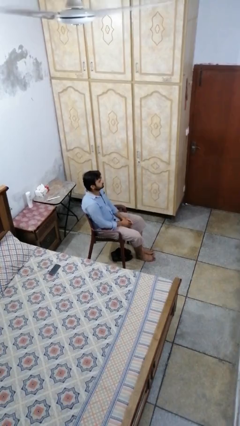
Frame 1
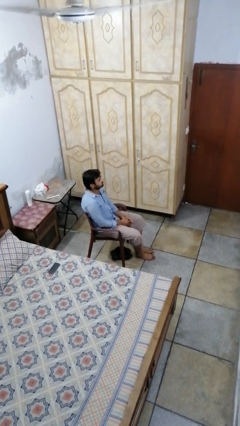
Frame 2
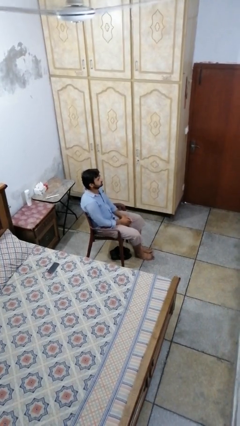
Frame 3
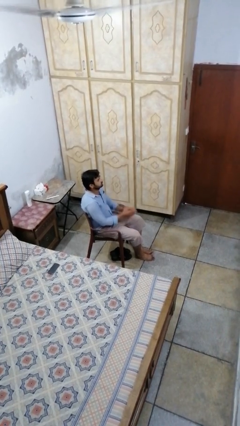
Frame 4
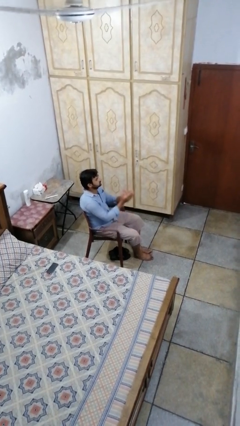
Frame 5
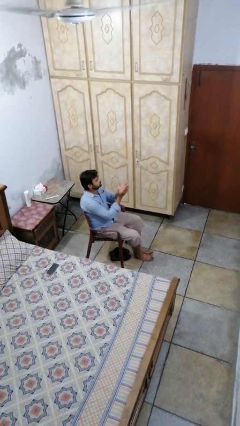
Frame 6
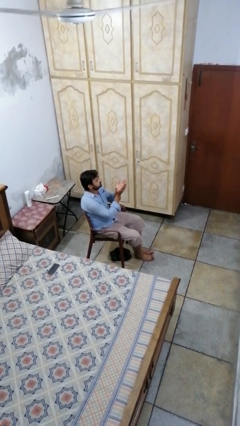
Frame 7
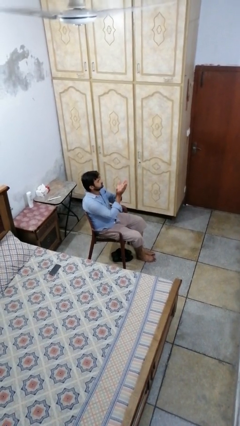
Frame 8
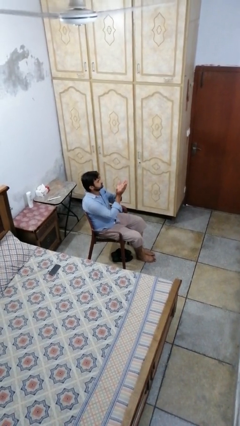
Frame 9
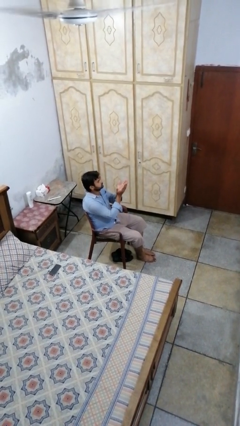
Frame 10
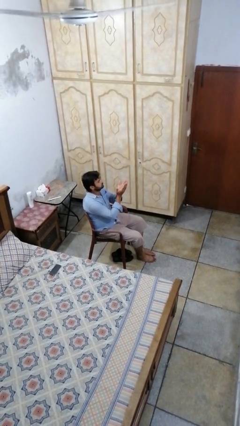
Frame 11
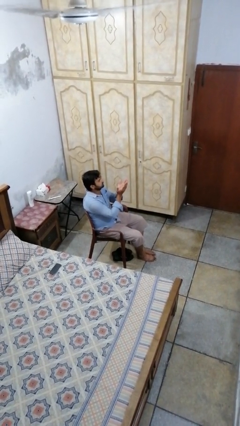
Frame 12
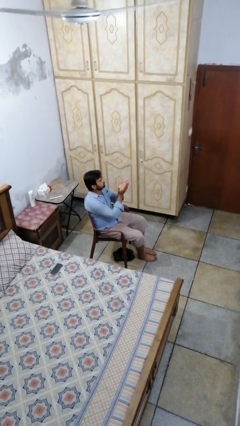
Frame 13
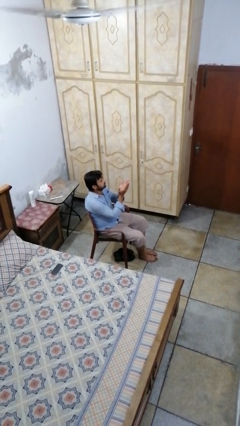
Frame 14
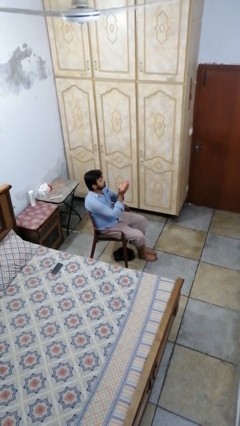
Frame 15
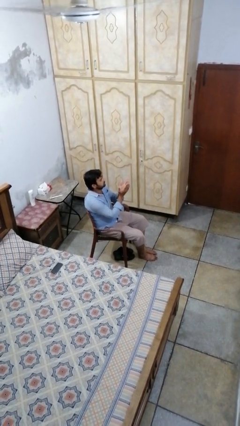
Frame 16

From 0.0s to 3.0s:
person prays

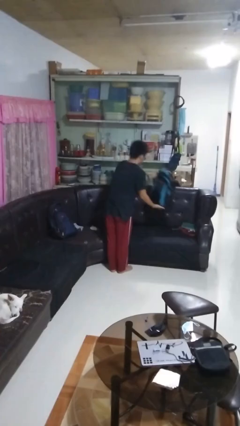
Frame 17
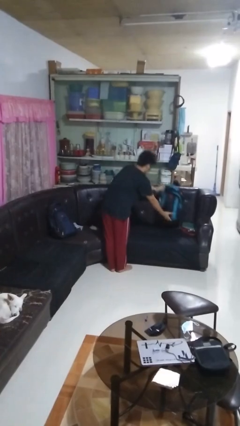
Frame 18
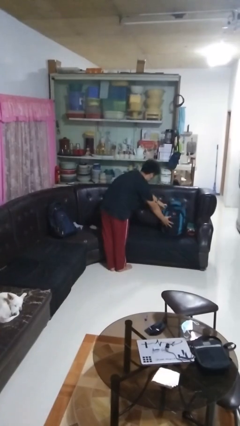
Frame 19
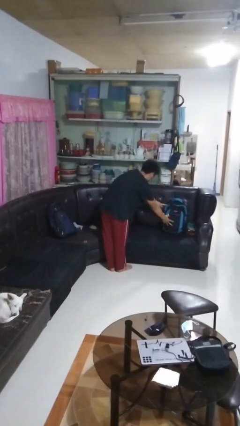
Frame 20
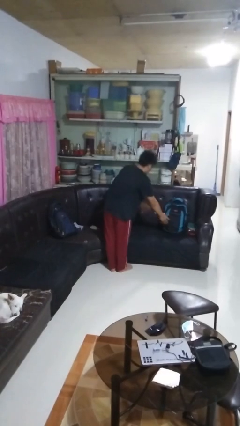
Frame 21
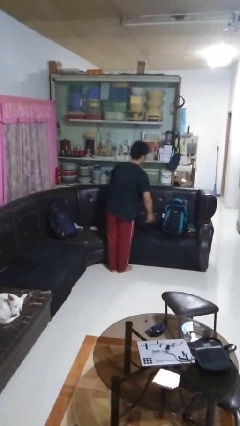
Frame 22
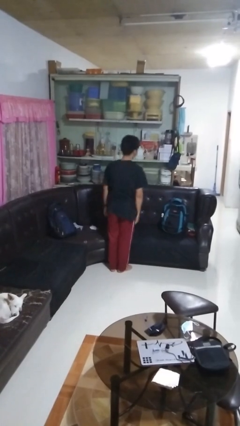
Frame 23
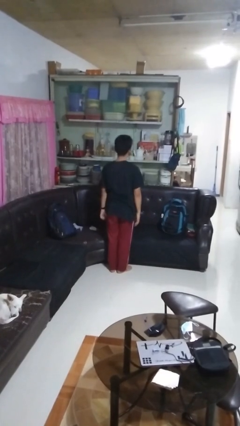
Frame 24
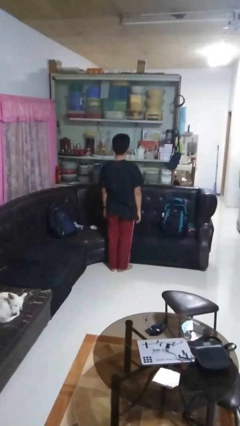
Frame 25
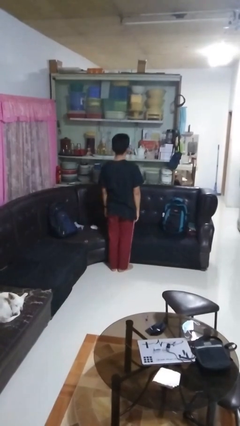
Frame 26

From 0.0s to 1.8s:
person puts down object on couch

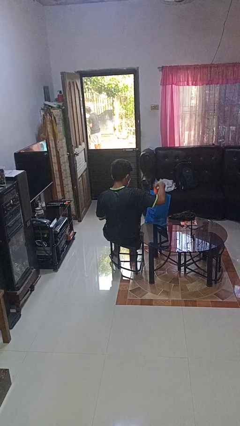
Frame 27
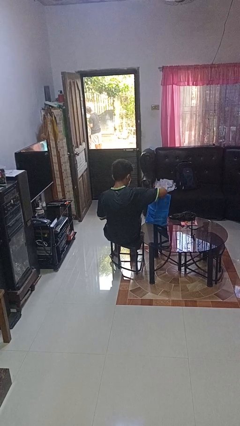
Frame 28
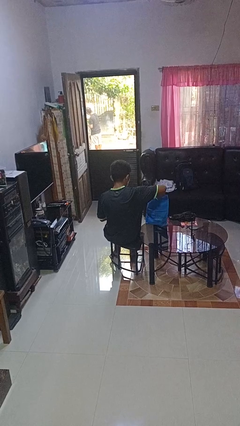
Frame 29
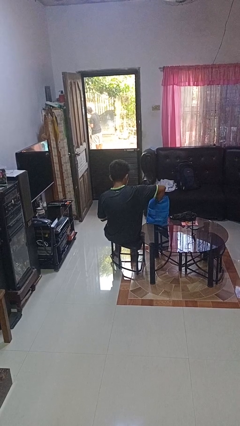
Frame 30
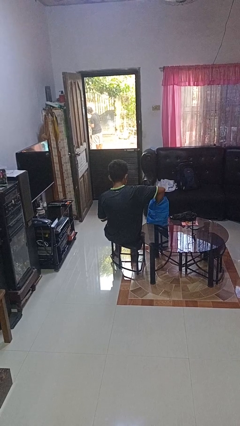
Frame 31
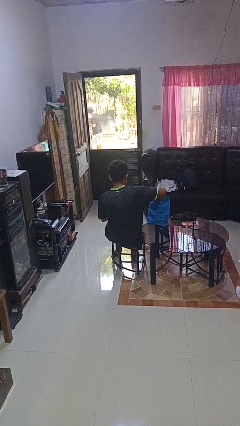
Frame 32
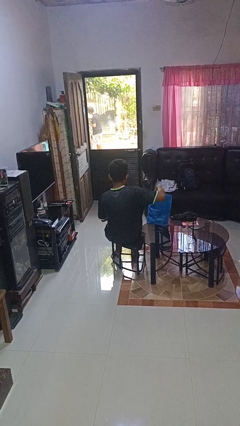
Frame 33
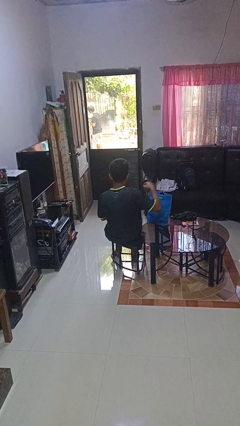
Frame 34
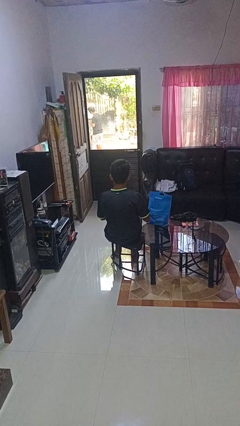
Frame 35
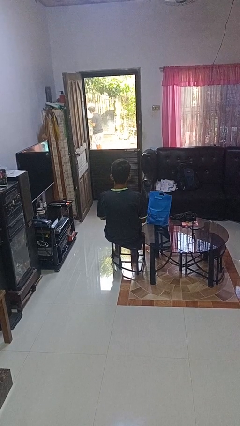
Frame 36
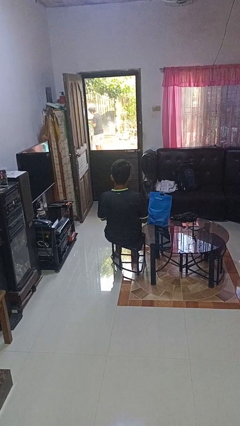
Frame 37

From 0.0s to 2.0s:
person puts object into bag

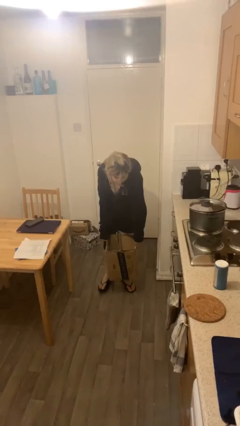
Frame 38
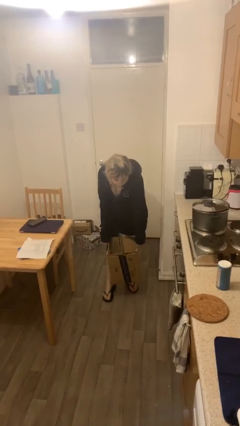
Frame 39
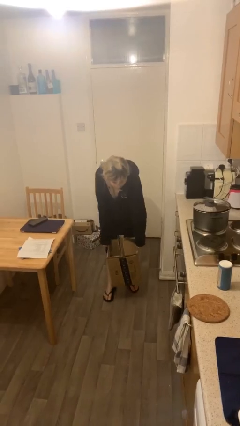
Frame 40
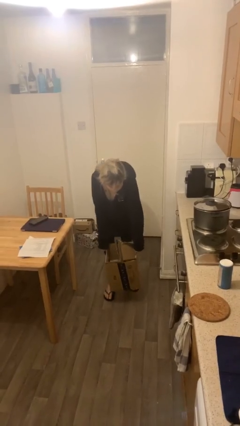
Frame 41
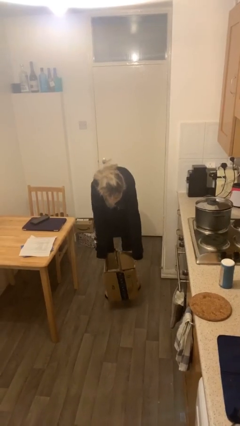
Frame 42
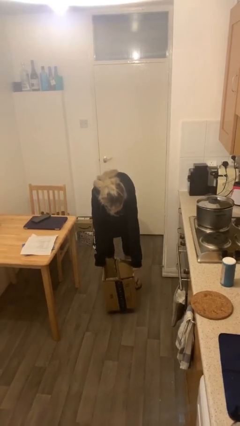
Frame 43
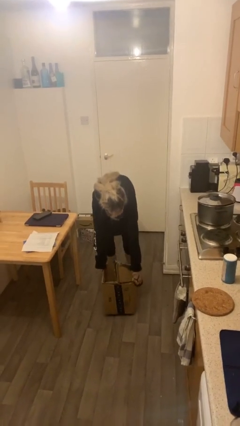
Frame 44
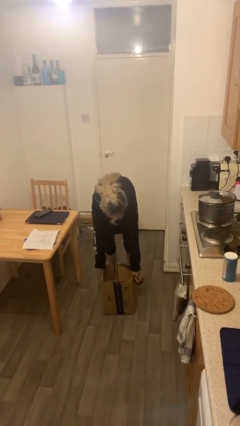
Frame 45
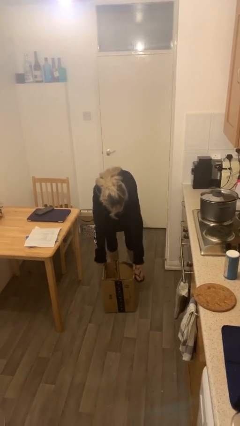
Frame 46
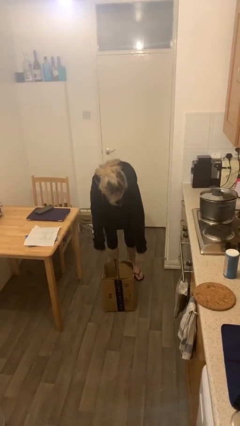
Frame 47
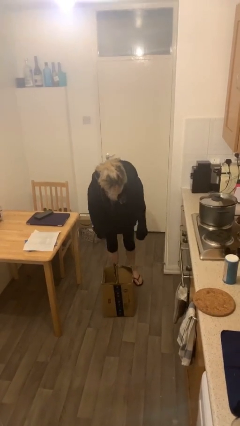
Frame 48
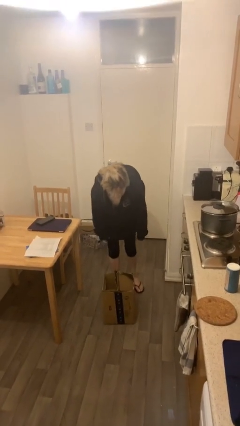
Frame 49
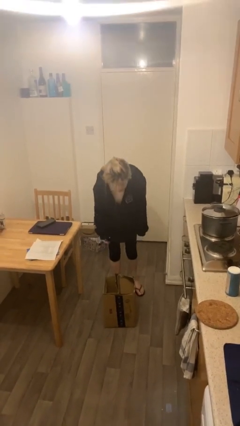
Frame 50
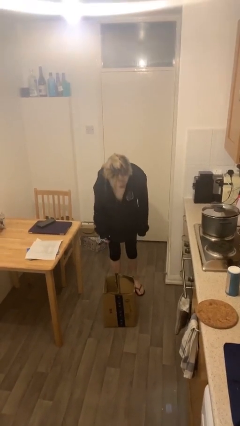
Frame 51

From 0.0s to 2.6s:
person puts down object on floor

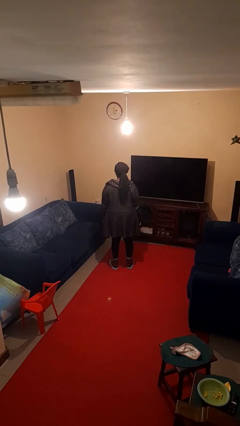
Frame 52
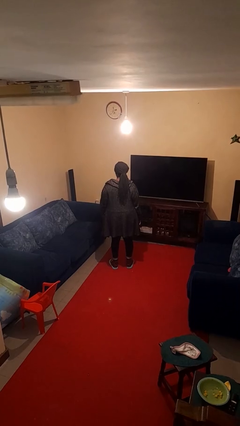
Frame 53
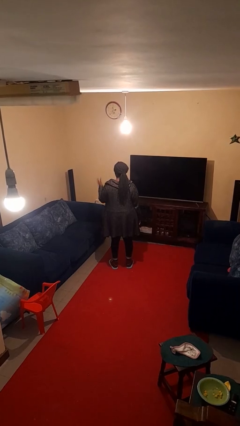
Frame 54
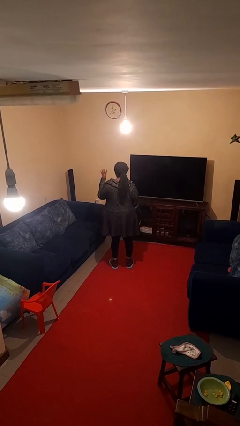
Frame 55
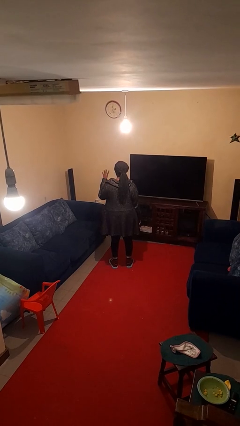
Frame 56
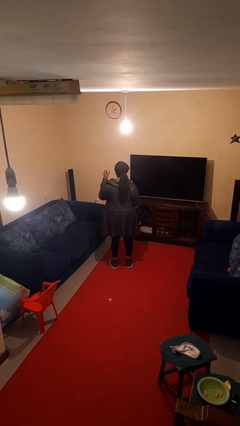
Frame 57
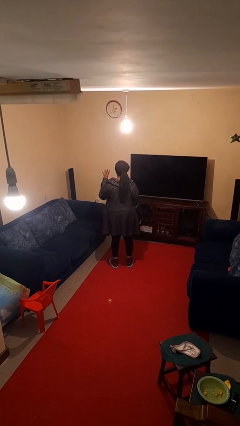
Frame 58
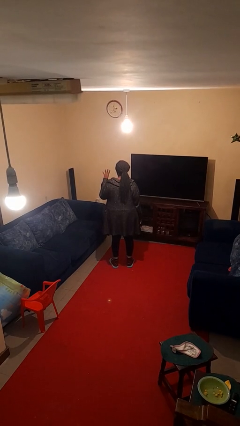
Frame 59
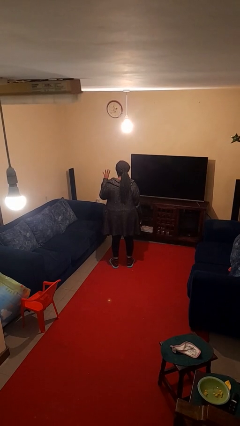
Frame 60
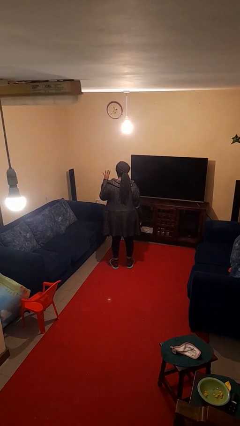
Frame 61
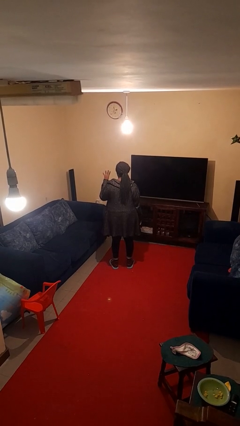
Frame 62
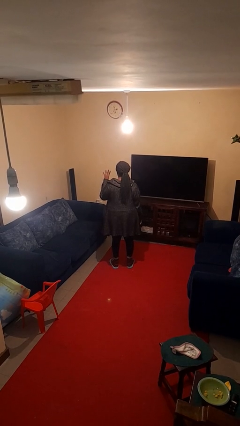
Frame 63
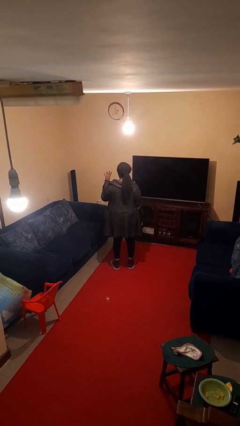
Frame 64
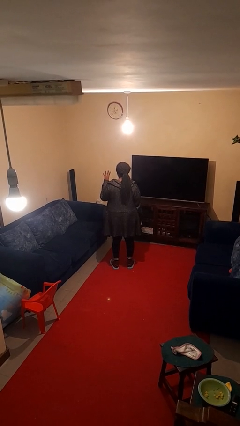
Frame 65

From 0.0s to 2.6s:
person gestures number four

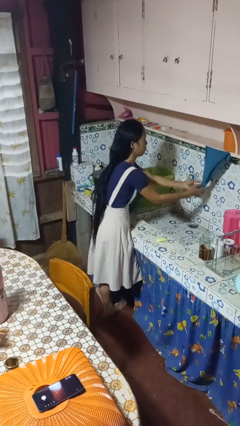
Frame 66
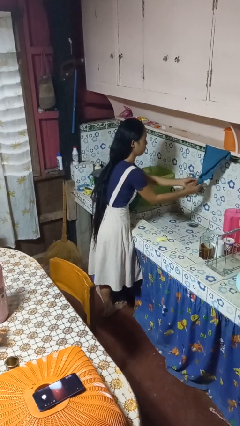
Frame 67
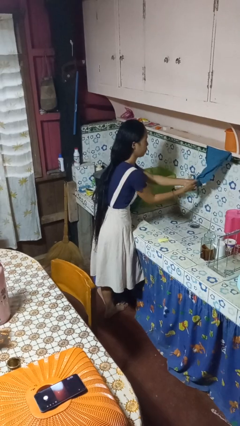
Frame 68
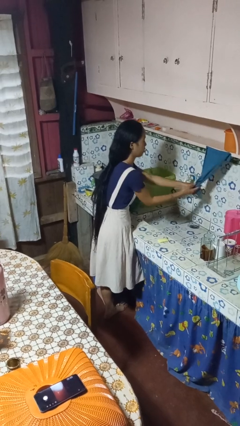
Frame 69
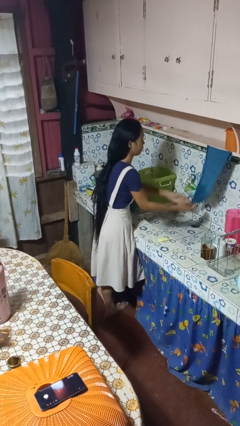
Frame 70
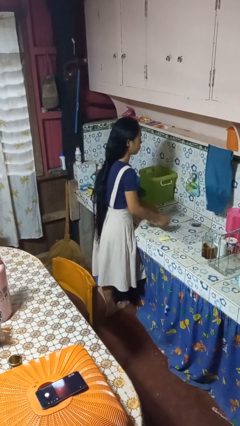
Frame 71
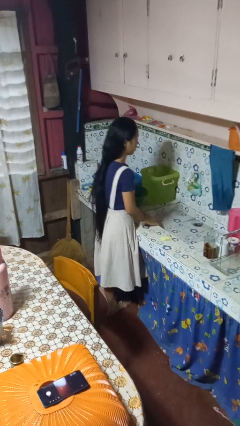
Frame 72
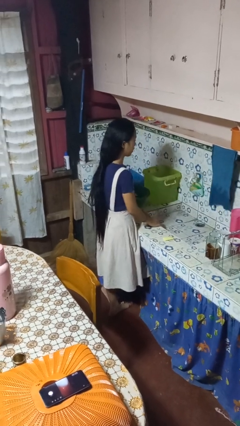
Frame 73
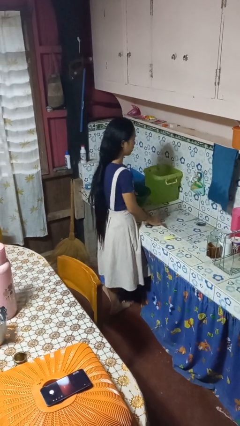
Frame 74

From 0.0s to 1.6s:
person dries hands with towel

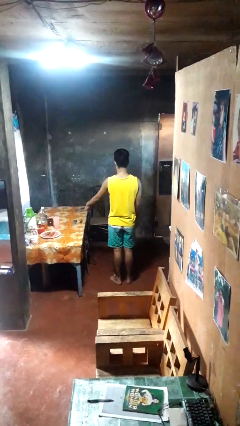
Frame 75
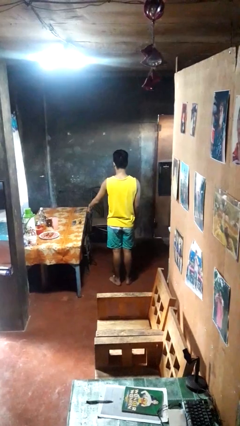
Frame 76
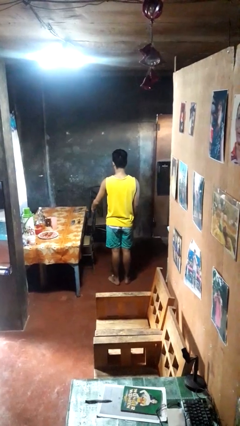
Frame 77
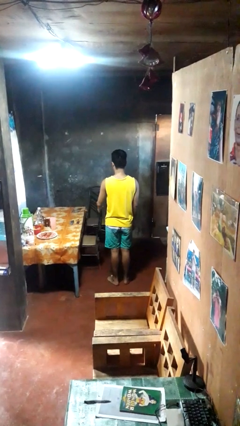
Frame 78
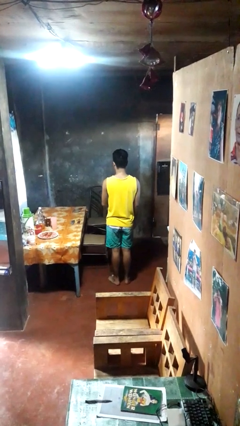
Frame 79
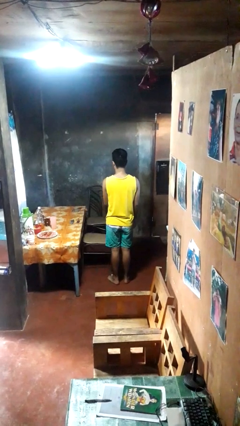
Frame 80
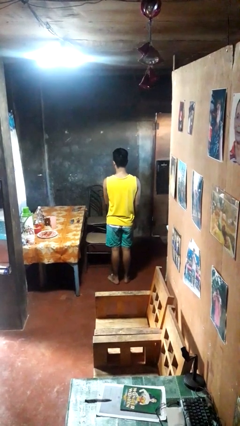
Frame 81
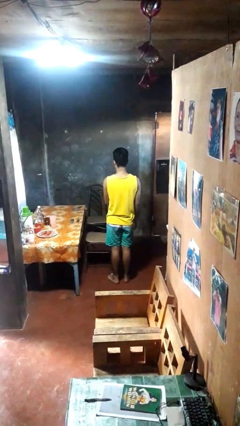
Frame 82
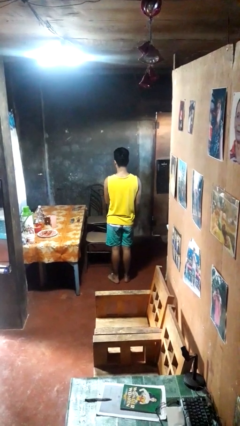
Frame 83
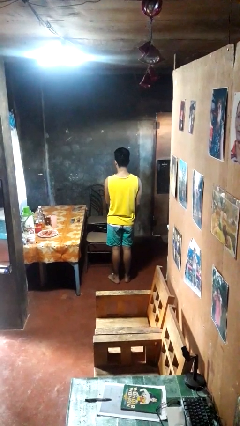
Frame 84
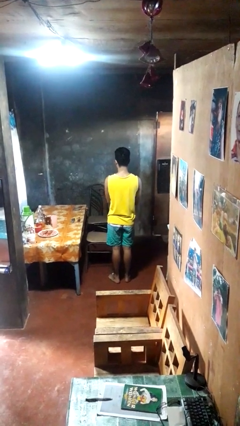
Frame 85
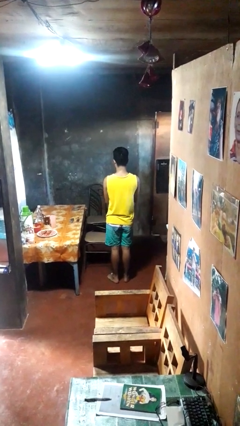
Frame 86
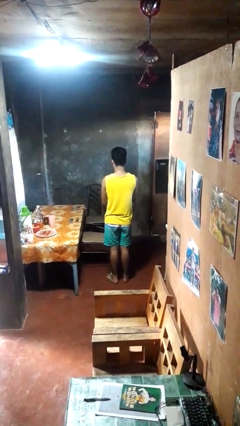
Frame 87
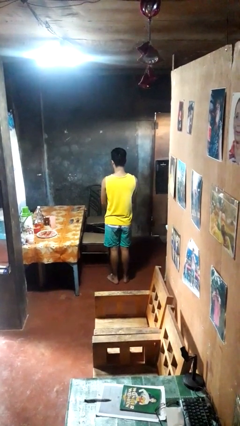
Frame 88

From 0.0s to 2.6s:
person pulls out chair

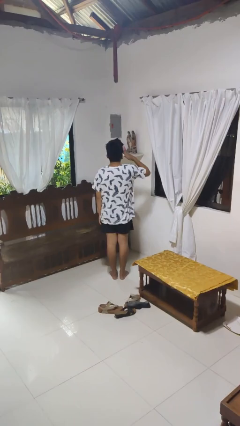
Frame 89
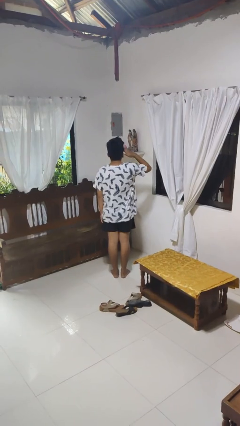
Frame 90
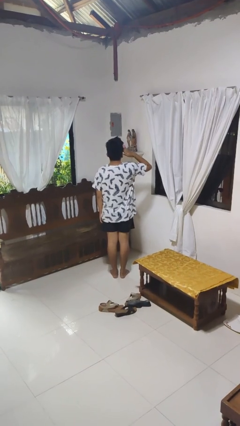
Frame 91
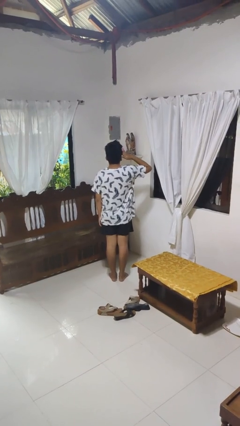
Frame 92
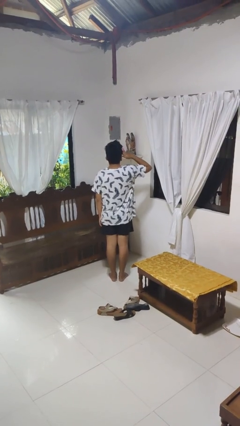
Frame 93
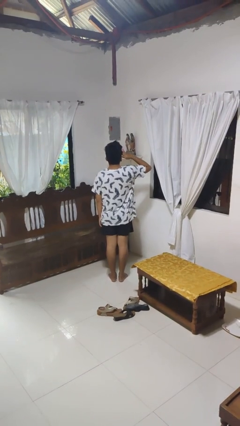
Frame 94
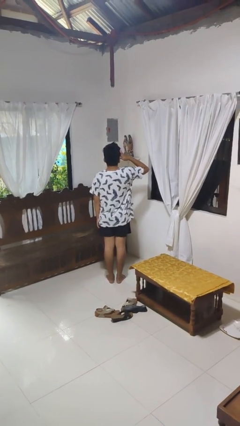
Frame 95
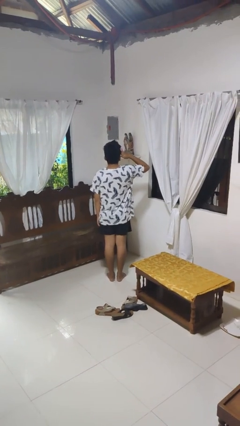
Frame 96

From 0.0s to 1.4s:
person salutes
